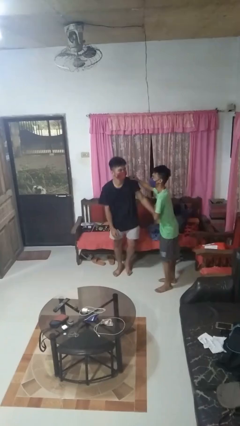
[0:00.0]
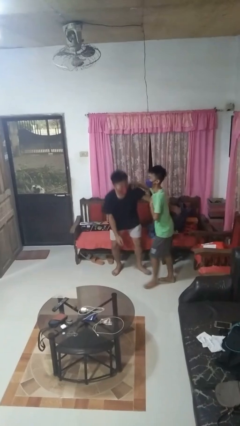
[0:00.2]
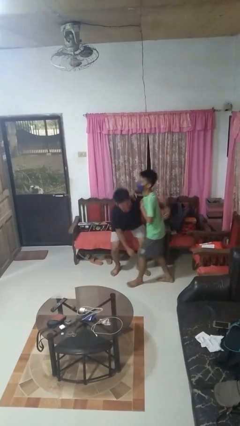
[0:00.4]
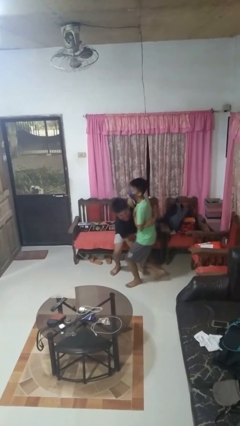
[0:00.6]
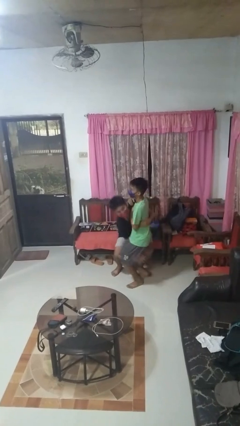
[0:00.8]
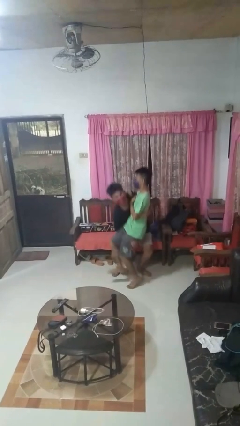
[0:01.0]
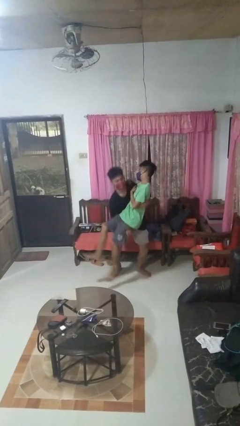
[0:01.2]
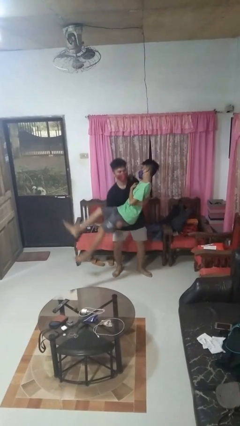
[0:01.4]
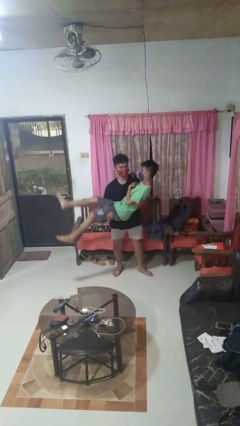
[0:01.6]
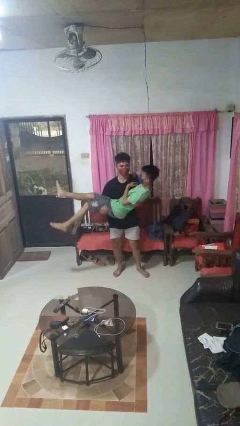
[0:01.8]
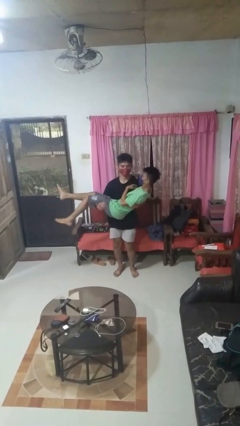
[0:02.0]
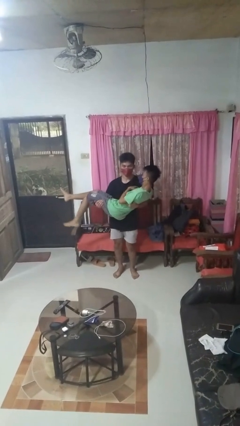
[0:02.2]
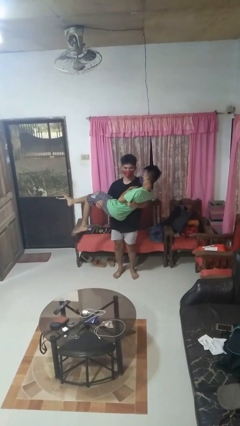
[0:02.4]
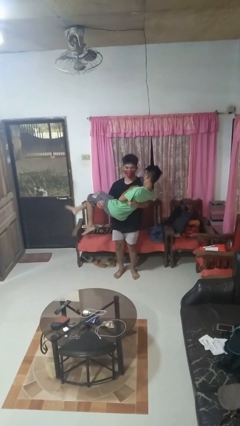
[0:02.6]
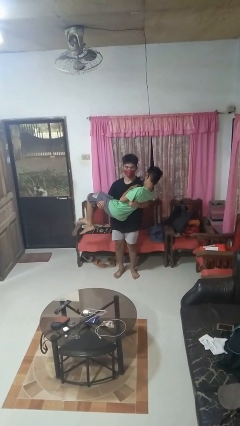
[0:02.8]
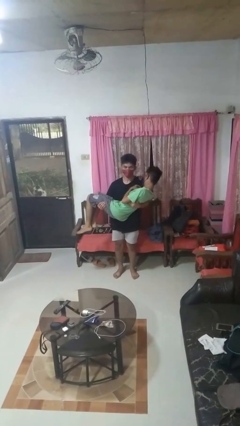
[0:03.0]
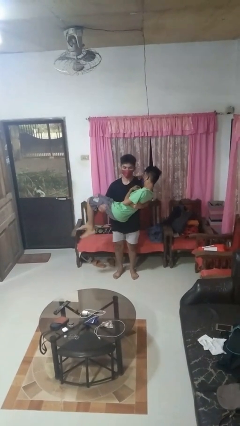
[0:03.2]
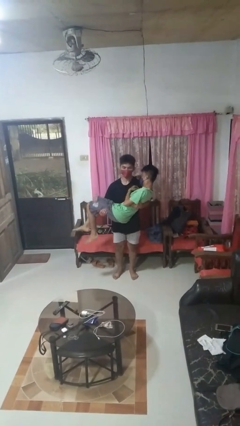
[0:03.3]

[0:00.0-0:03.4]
person picks up person

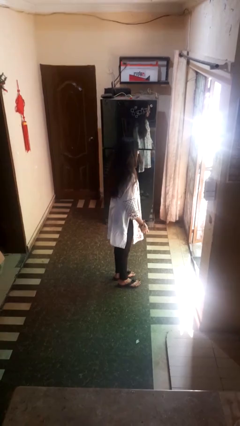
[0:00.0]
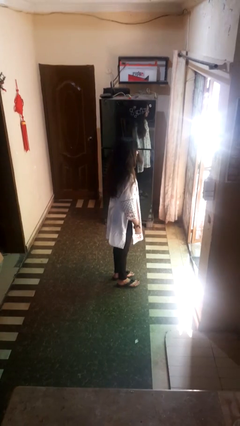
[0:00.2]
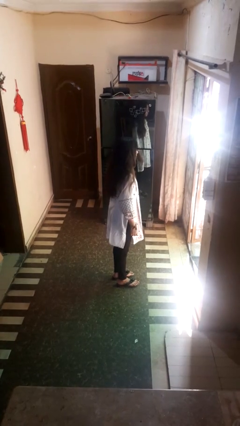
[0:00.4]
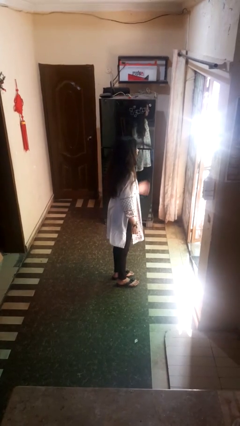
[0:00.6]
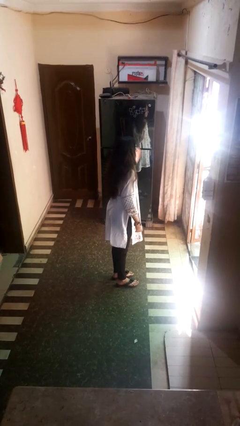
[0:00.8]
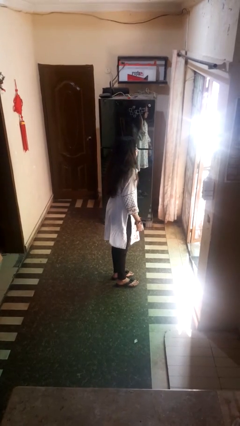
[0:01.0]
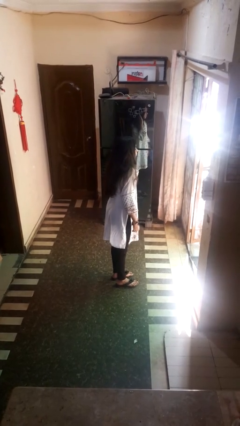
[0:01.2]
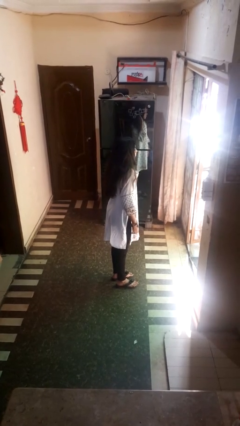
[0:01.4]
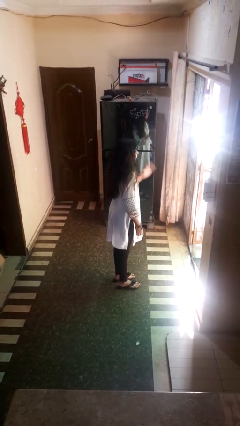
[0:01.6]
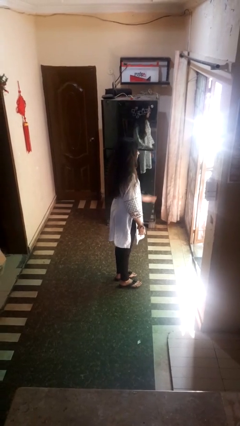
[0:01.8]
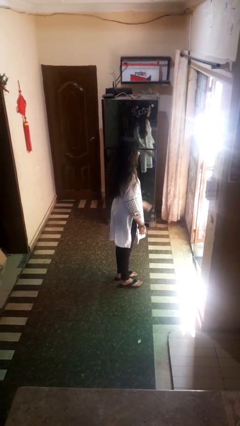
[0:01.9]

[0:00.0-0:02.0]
person gestures listen closely

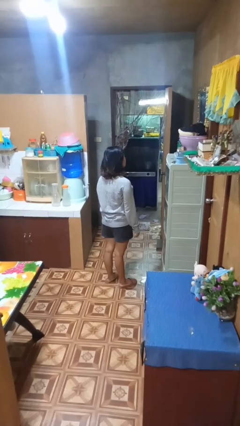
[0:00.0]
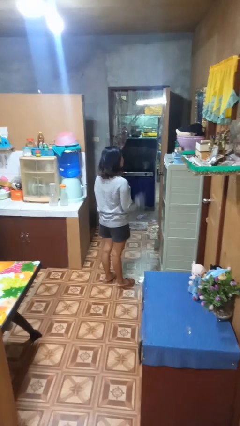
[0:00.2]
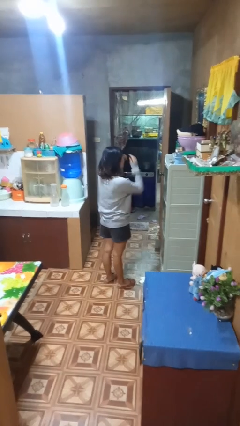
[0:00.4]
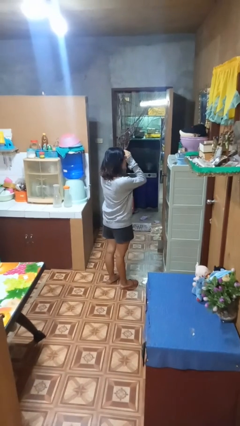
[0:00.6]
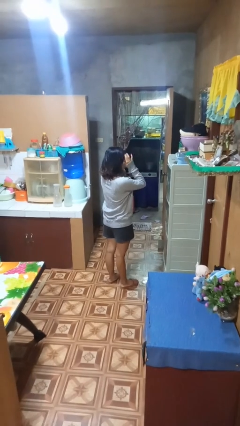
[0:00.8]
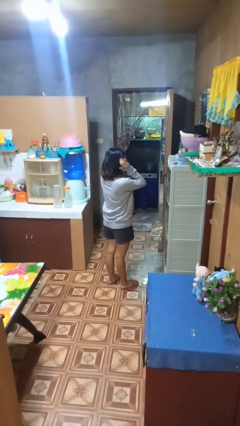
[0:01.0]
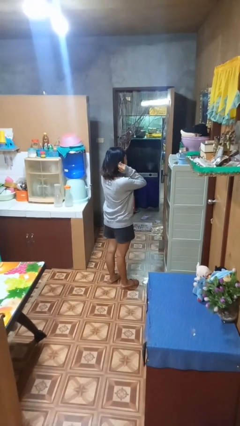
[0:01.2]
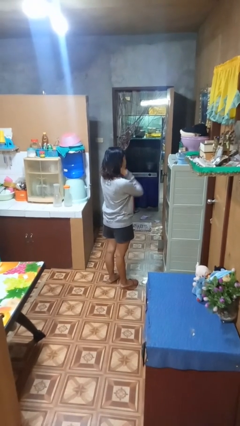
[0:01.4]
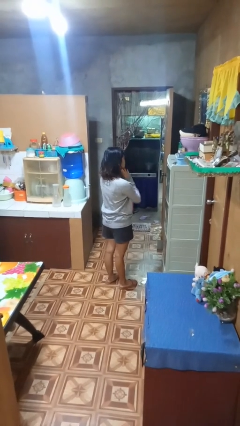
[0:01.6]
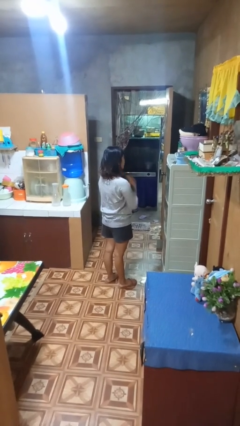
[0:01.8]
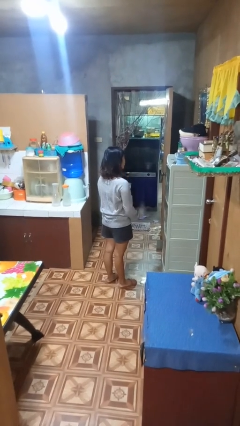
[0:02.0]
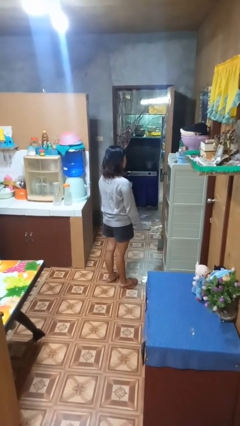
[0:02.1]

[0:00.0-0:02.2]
person strokes hair

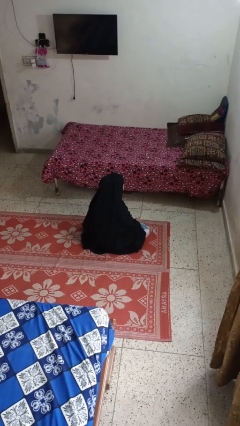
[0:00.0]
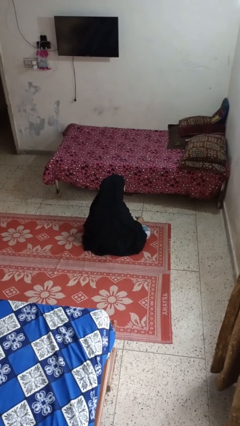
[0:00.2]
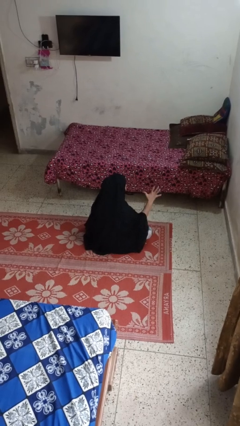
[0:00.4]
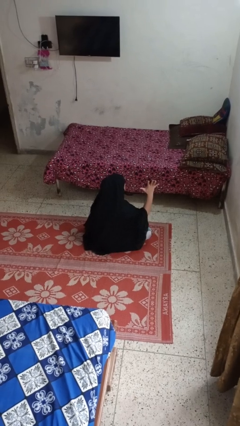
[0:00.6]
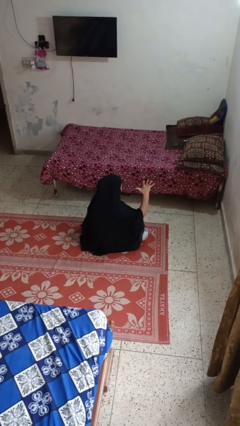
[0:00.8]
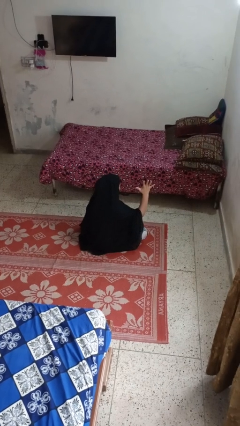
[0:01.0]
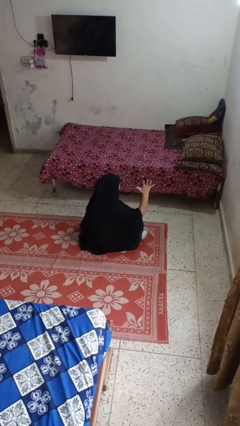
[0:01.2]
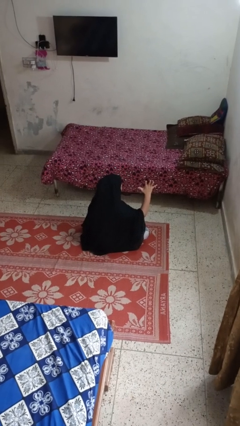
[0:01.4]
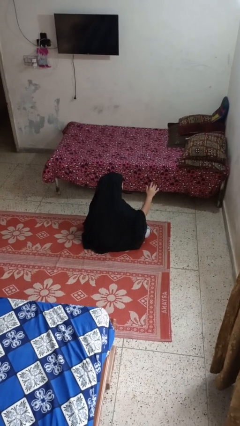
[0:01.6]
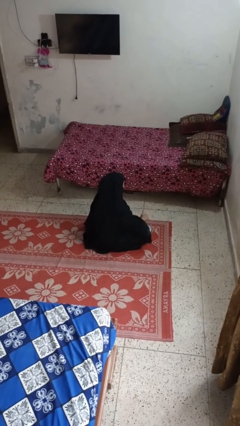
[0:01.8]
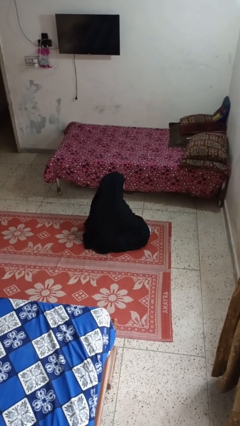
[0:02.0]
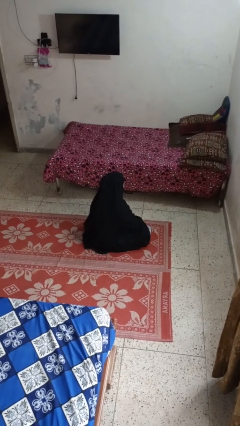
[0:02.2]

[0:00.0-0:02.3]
person gestures number five

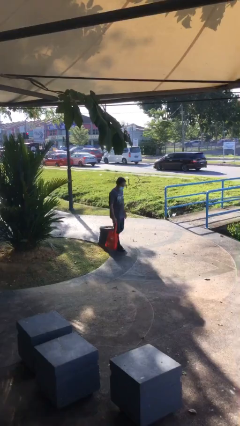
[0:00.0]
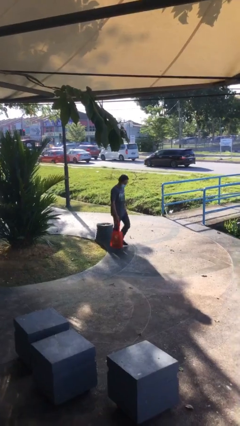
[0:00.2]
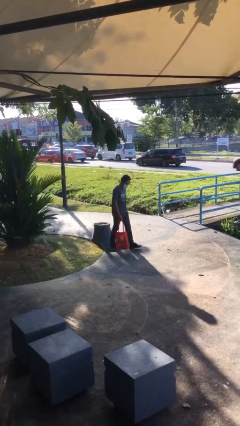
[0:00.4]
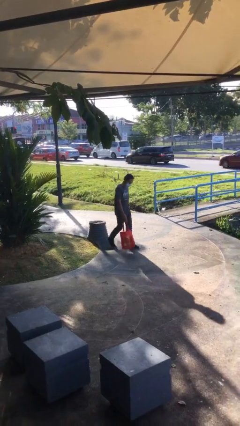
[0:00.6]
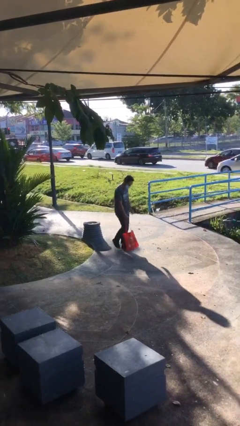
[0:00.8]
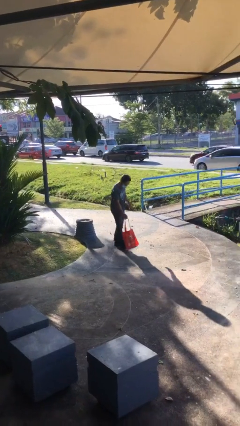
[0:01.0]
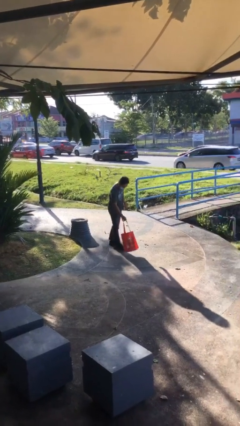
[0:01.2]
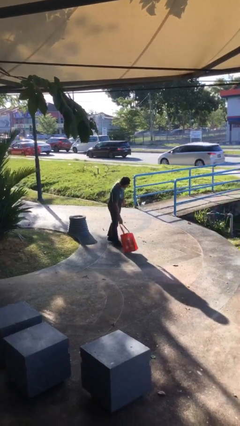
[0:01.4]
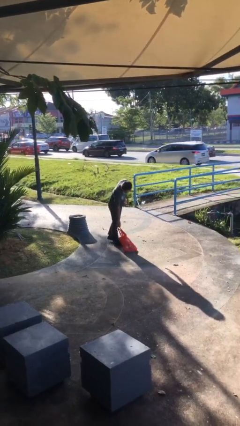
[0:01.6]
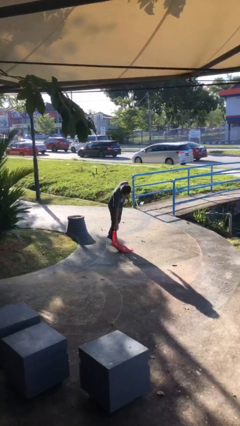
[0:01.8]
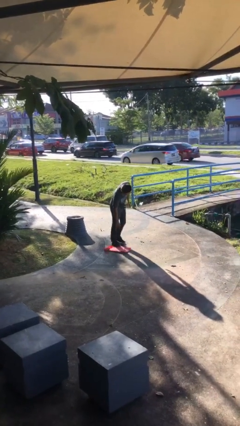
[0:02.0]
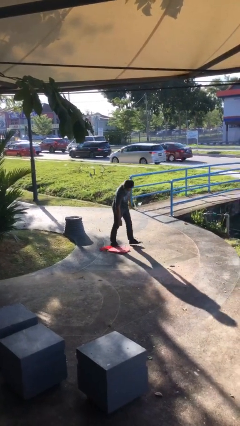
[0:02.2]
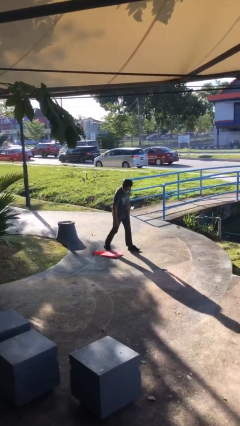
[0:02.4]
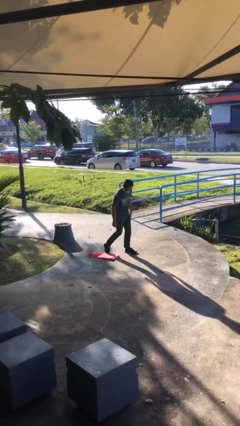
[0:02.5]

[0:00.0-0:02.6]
person puts down object on floor

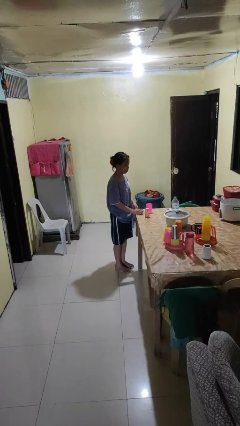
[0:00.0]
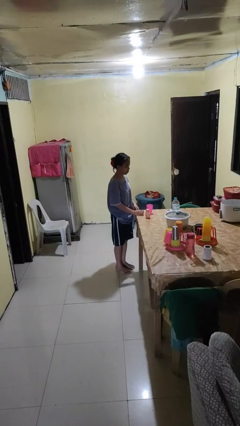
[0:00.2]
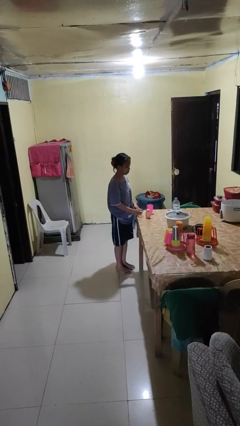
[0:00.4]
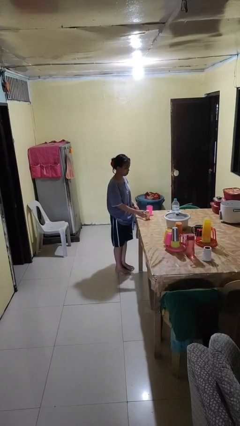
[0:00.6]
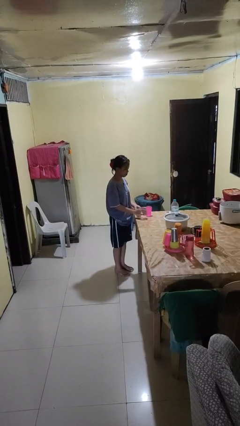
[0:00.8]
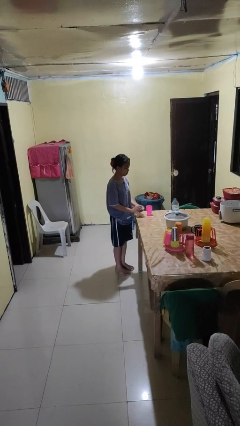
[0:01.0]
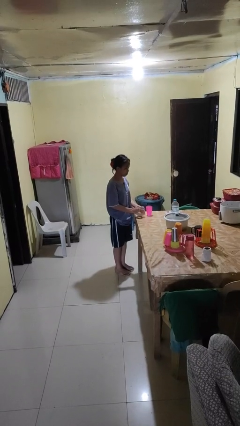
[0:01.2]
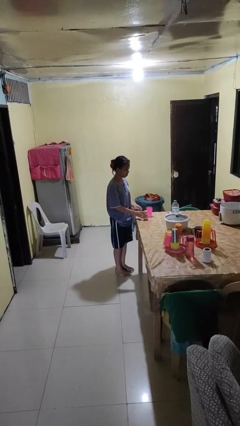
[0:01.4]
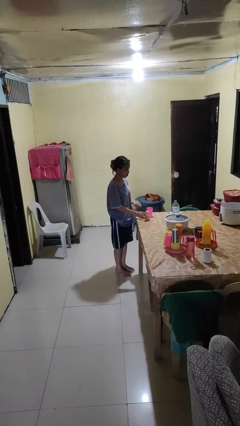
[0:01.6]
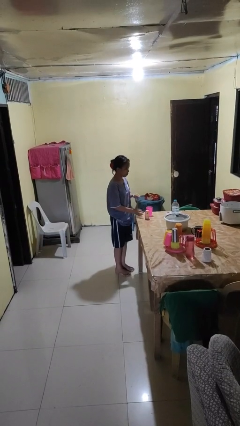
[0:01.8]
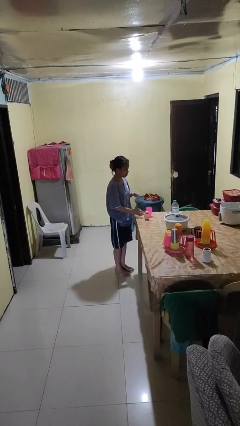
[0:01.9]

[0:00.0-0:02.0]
person takes medicine pills

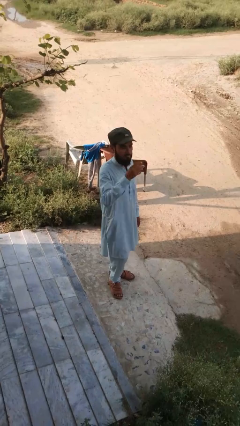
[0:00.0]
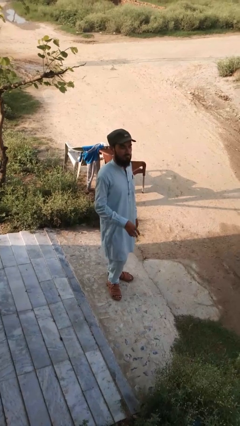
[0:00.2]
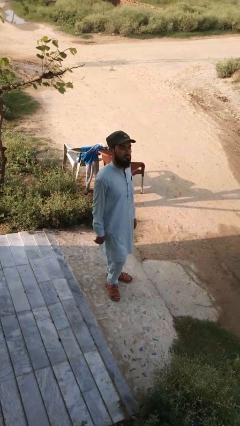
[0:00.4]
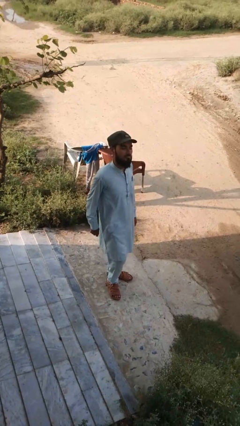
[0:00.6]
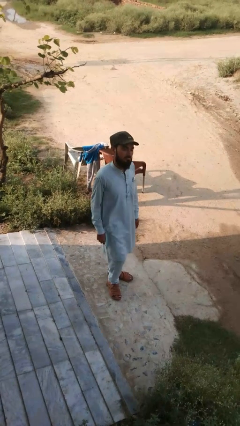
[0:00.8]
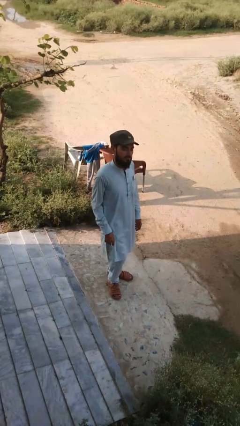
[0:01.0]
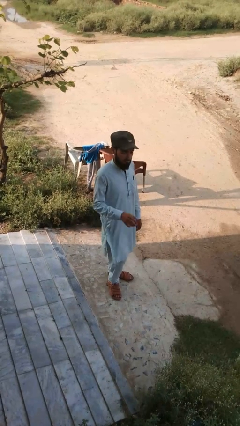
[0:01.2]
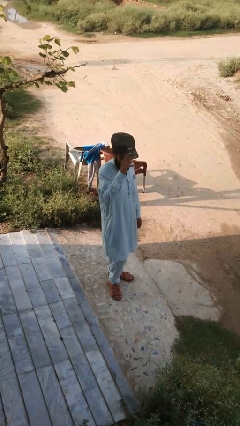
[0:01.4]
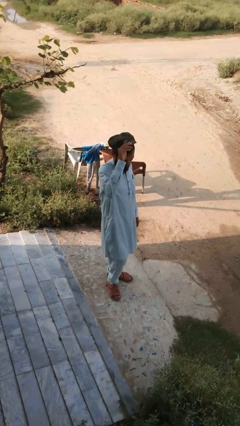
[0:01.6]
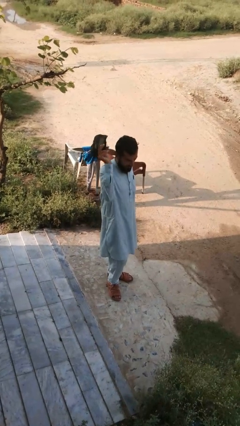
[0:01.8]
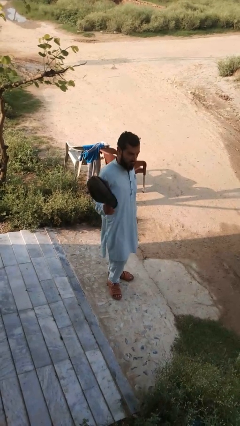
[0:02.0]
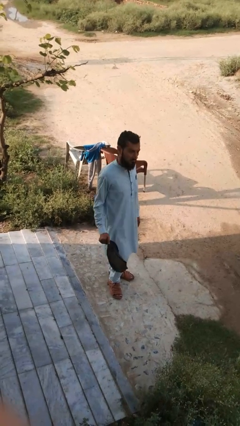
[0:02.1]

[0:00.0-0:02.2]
person takes off hat
